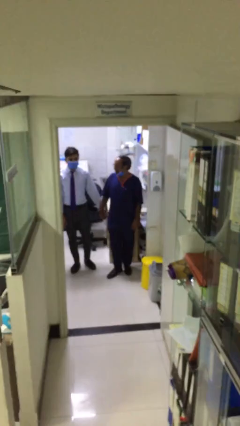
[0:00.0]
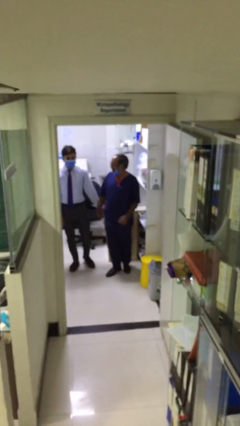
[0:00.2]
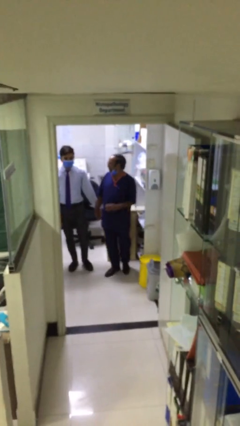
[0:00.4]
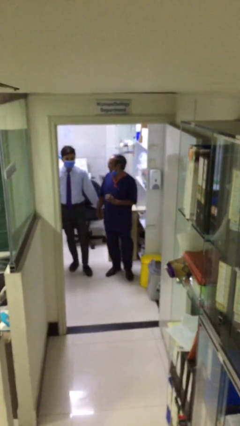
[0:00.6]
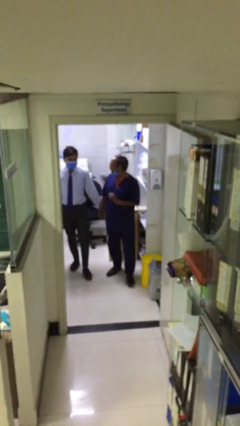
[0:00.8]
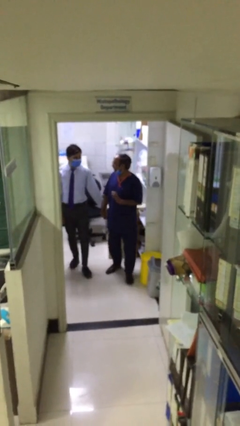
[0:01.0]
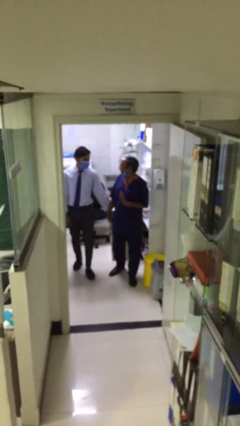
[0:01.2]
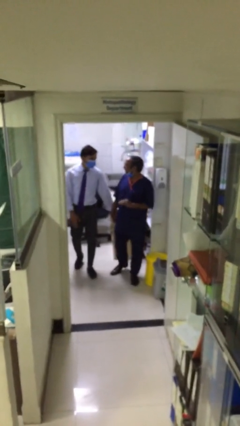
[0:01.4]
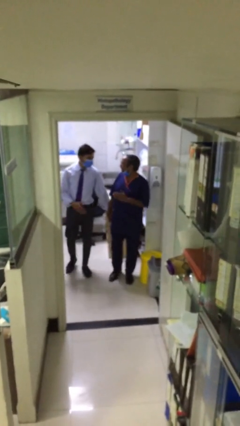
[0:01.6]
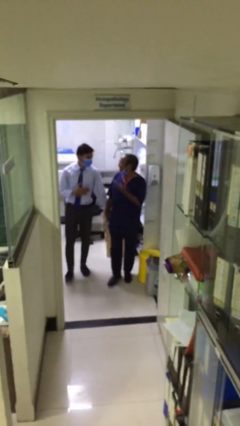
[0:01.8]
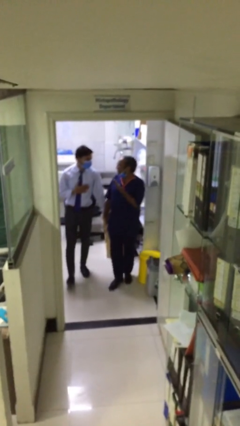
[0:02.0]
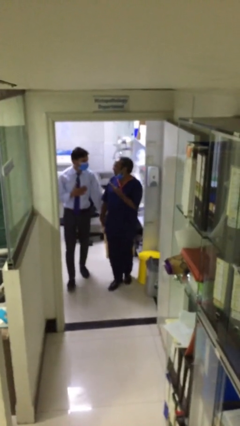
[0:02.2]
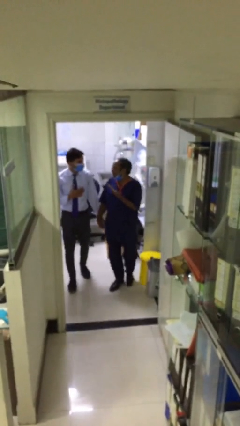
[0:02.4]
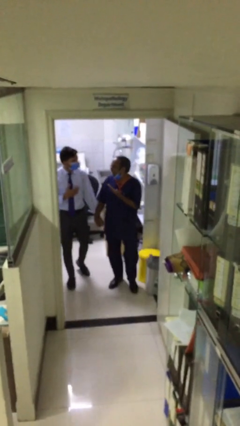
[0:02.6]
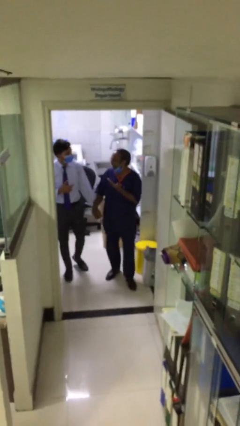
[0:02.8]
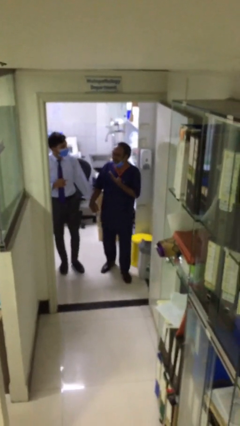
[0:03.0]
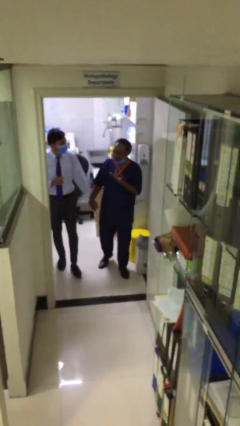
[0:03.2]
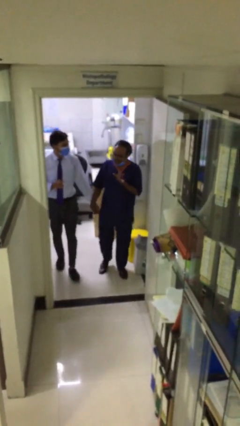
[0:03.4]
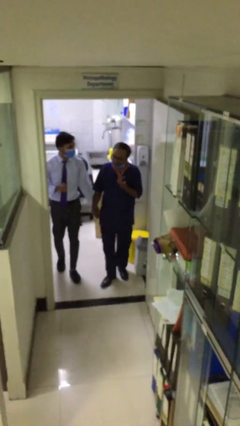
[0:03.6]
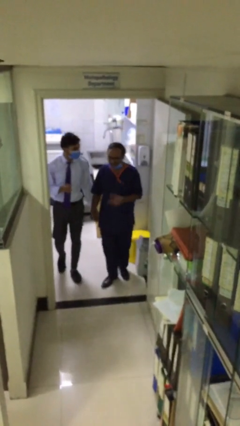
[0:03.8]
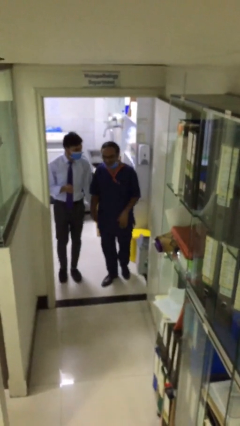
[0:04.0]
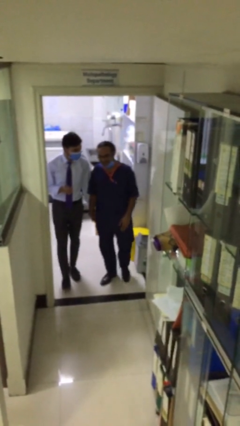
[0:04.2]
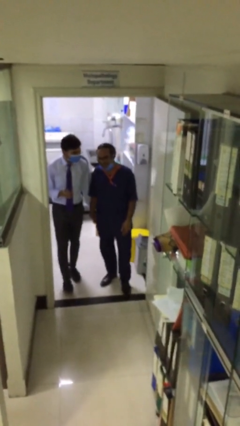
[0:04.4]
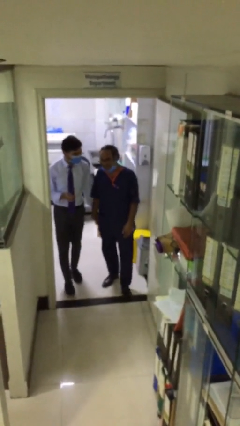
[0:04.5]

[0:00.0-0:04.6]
person holds hand

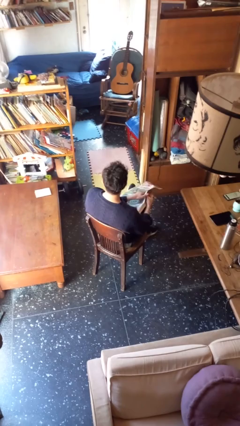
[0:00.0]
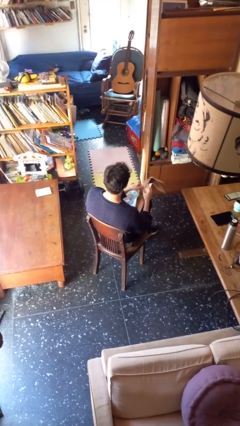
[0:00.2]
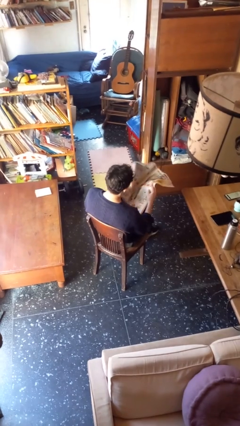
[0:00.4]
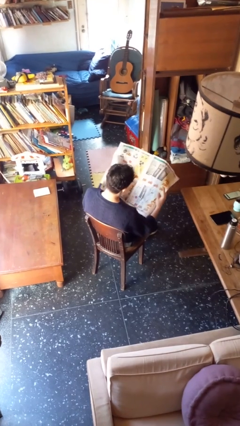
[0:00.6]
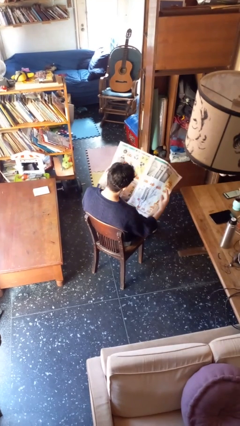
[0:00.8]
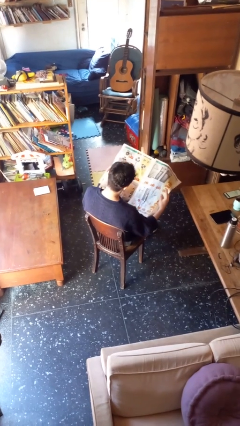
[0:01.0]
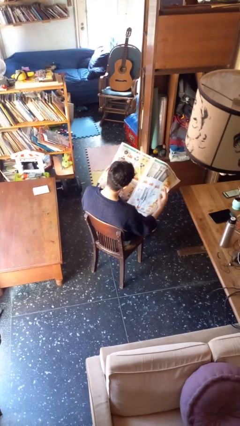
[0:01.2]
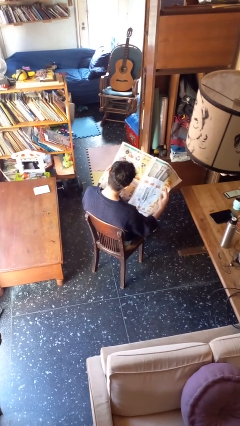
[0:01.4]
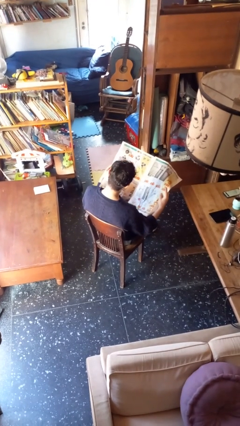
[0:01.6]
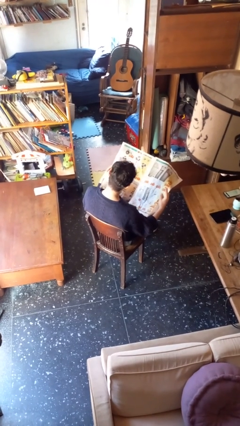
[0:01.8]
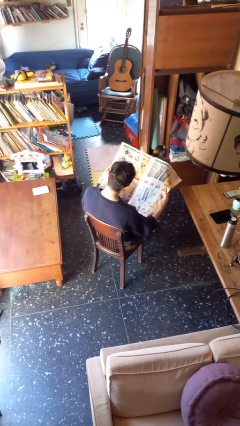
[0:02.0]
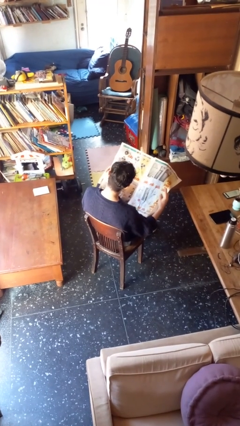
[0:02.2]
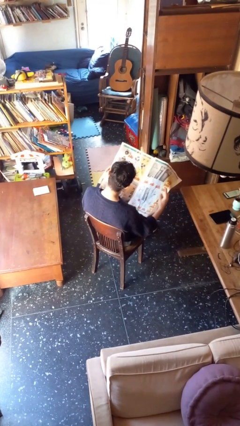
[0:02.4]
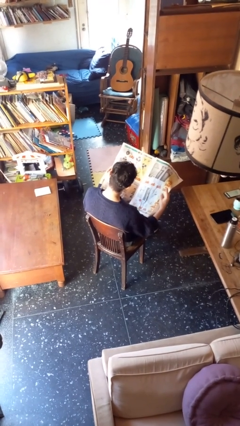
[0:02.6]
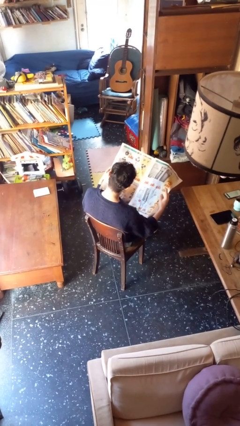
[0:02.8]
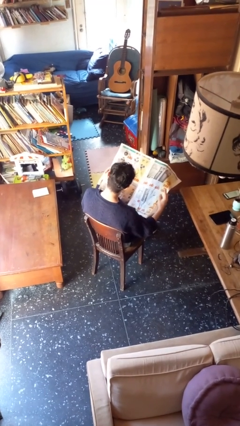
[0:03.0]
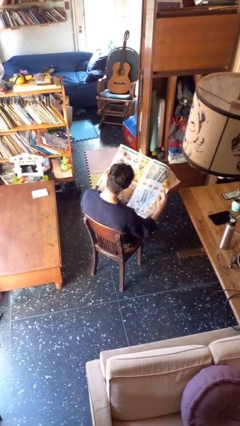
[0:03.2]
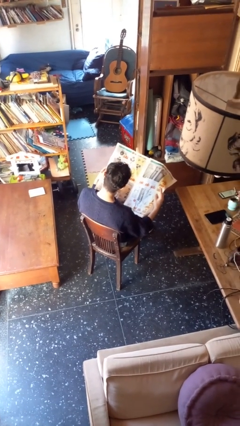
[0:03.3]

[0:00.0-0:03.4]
person reads newspaper

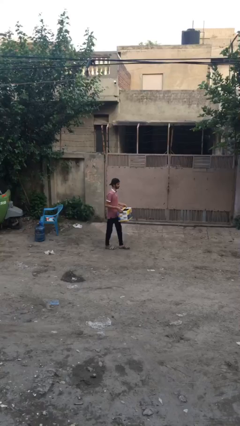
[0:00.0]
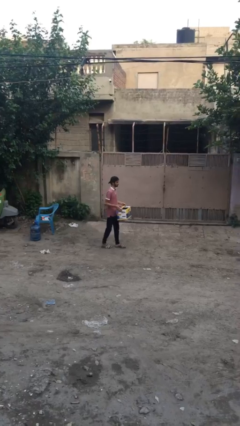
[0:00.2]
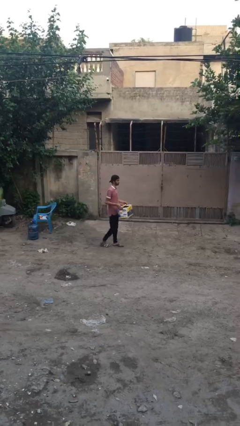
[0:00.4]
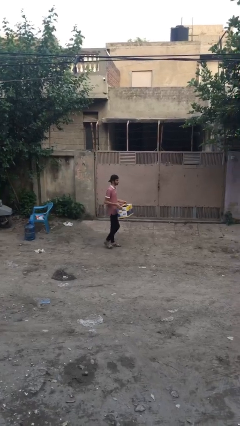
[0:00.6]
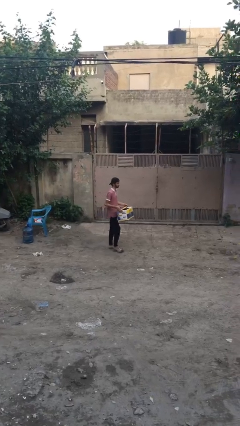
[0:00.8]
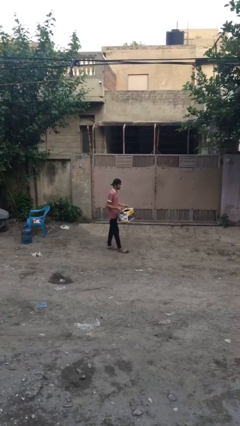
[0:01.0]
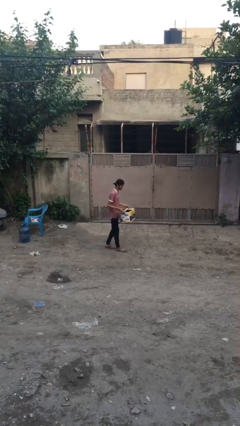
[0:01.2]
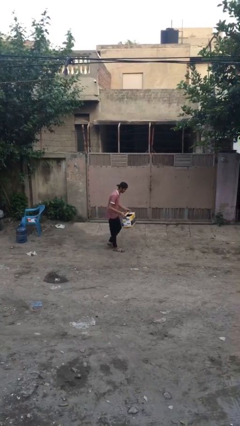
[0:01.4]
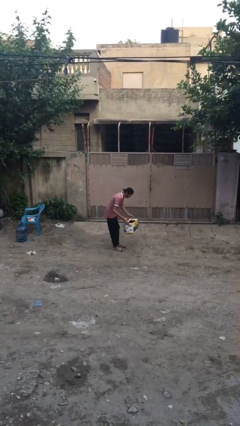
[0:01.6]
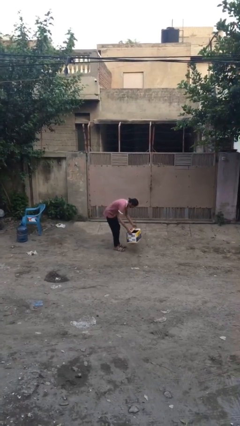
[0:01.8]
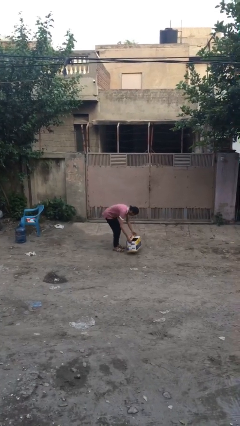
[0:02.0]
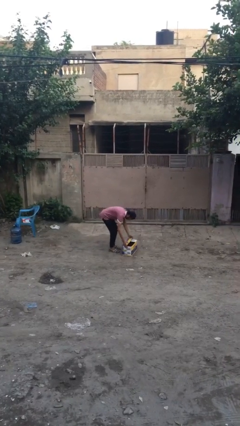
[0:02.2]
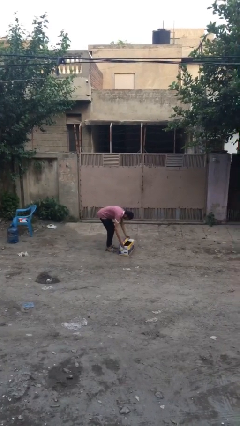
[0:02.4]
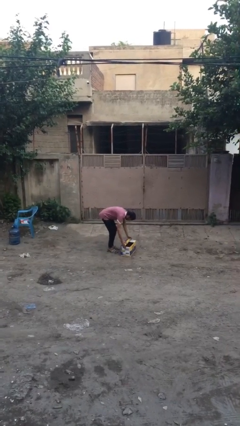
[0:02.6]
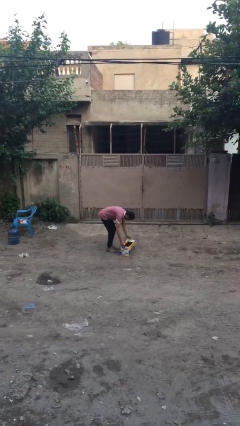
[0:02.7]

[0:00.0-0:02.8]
person puts down object on floor

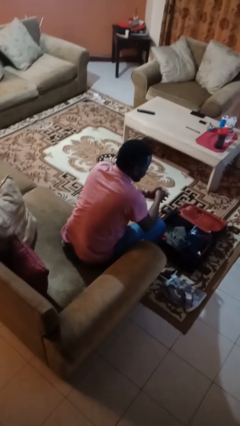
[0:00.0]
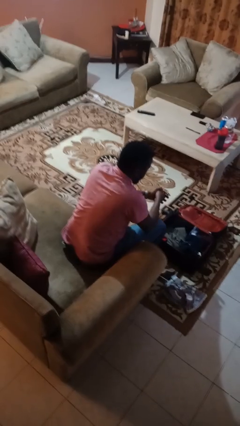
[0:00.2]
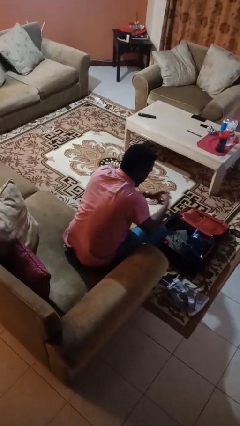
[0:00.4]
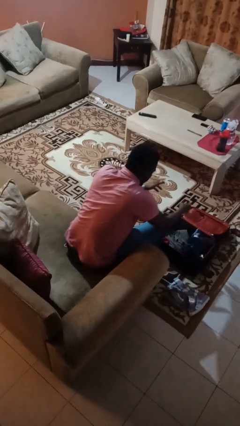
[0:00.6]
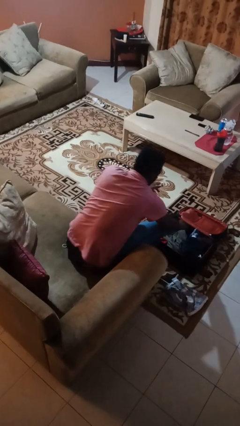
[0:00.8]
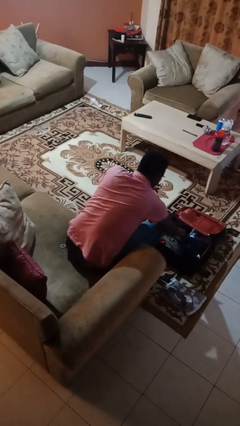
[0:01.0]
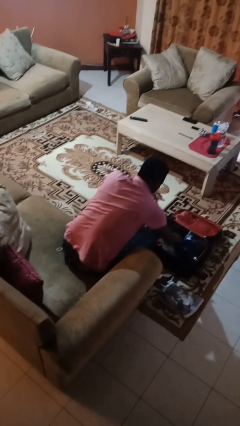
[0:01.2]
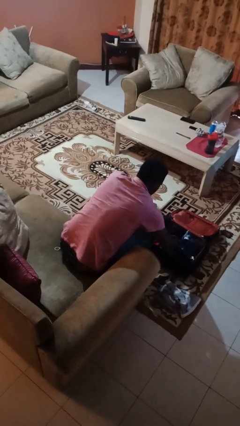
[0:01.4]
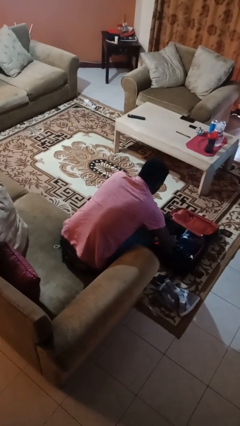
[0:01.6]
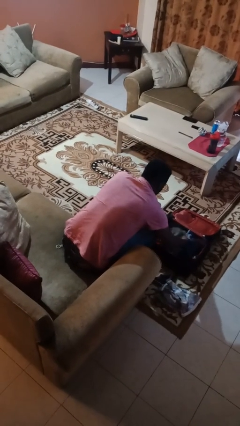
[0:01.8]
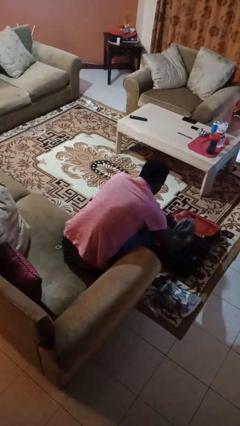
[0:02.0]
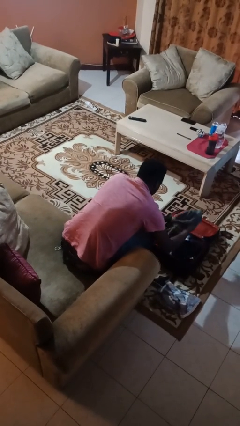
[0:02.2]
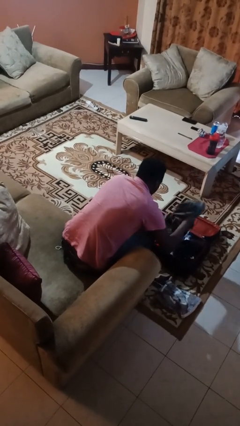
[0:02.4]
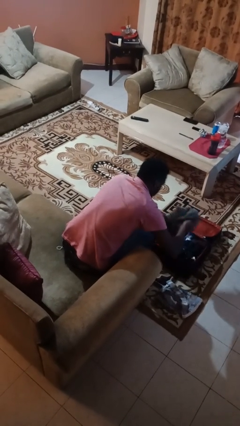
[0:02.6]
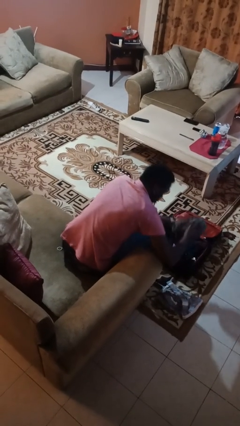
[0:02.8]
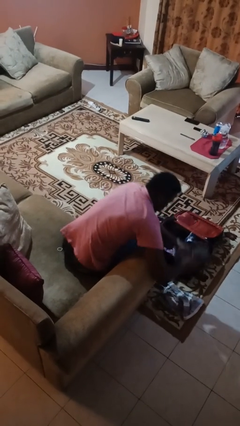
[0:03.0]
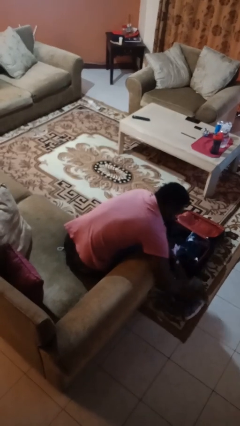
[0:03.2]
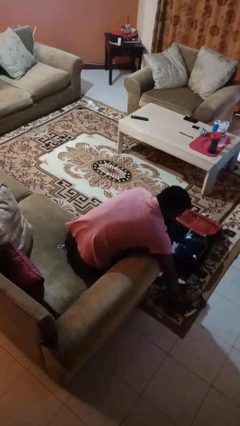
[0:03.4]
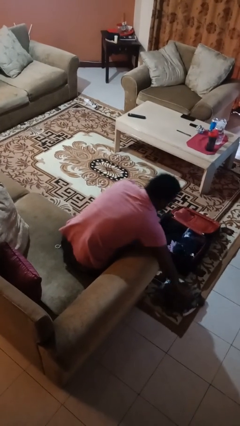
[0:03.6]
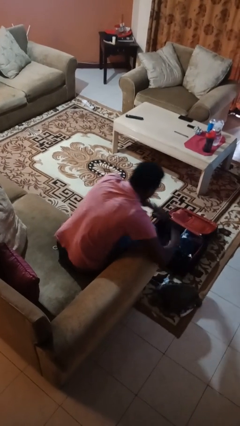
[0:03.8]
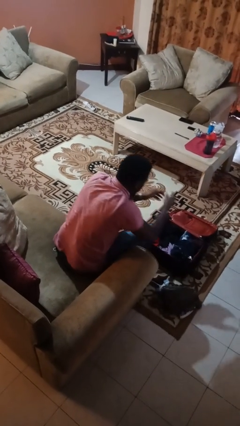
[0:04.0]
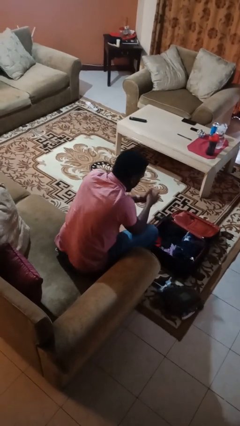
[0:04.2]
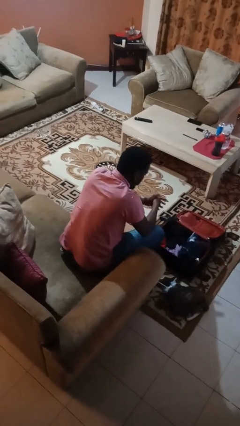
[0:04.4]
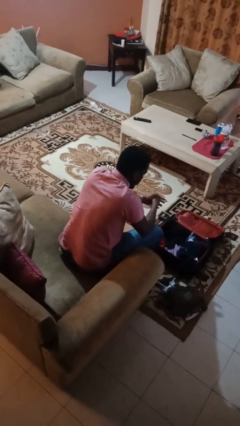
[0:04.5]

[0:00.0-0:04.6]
person unloads clothes from suitcase

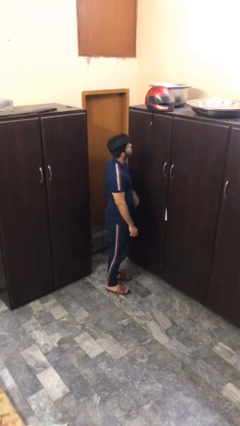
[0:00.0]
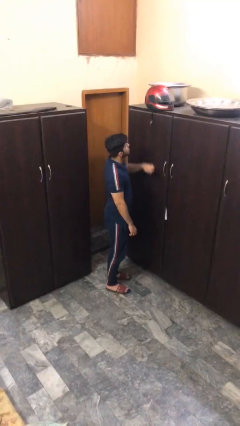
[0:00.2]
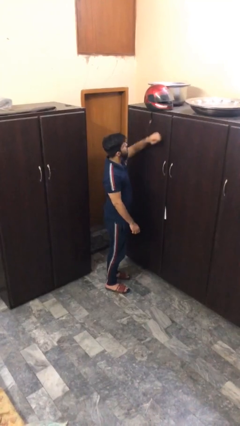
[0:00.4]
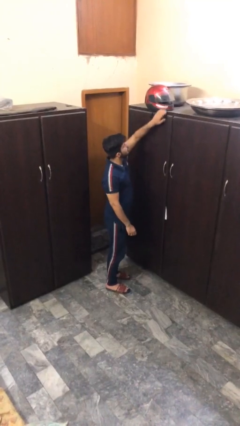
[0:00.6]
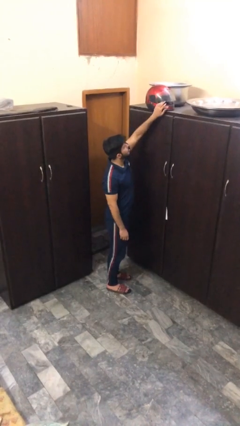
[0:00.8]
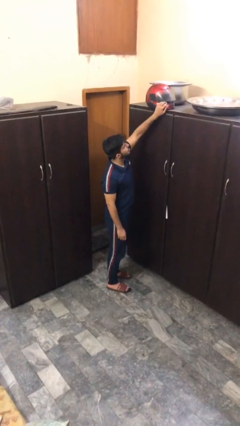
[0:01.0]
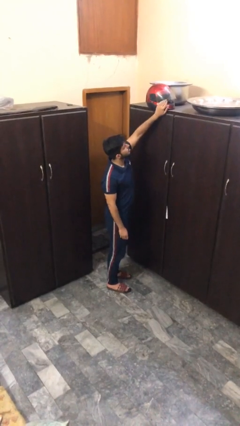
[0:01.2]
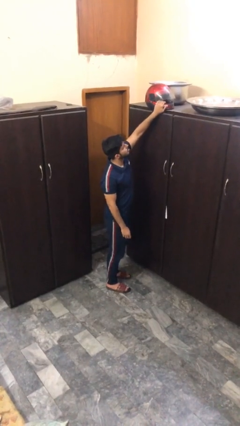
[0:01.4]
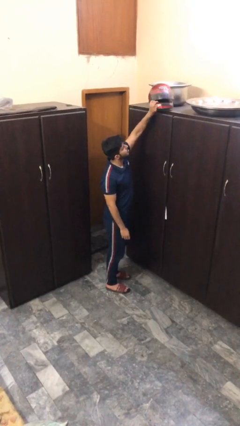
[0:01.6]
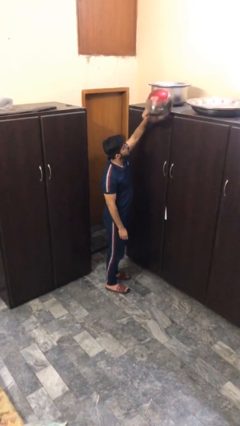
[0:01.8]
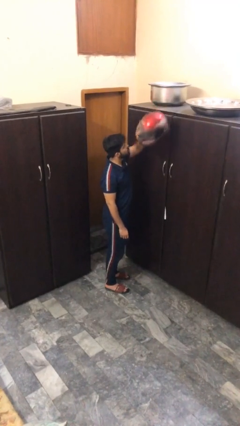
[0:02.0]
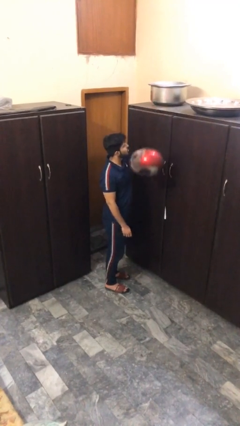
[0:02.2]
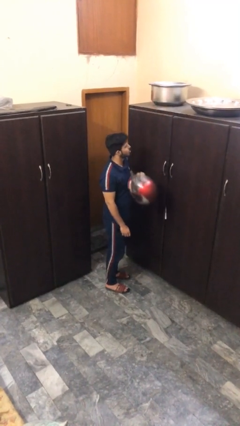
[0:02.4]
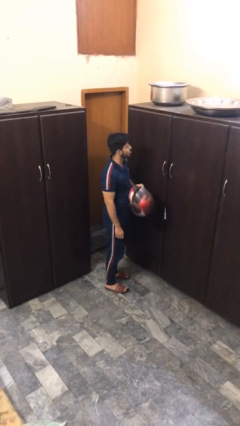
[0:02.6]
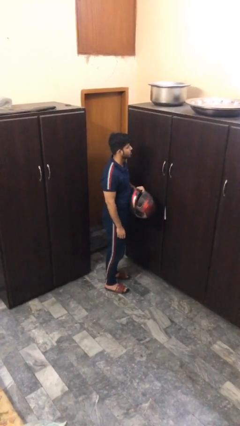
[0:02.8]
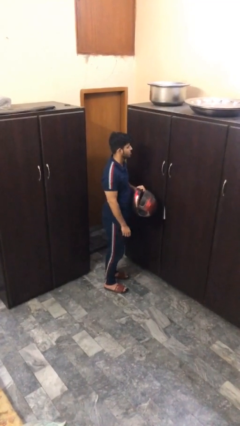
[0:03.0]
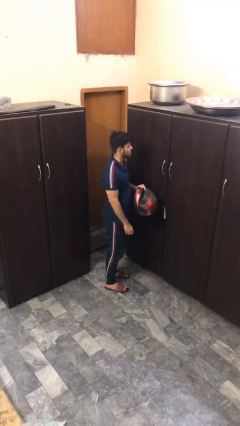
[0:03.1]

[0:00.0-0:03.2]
person picks up object from shelf
